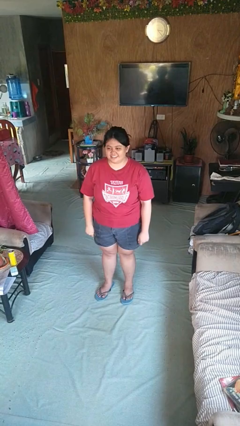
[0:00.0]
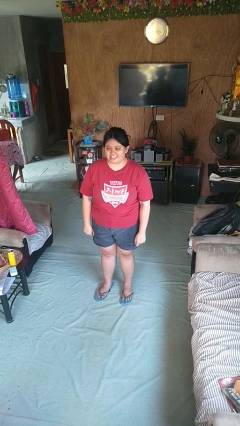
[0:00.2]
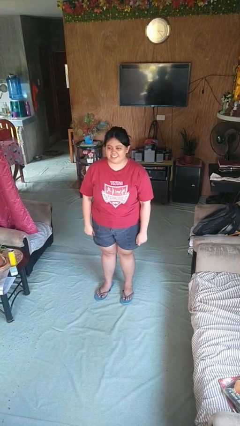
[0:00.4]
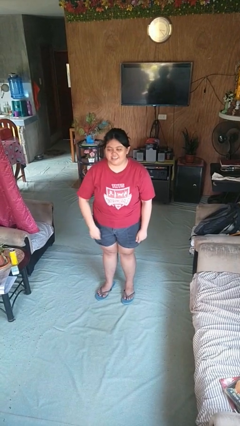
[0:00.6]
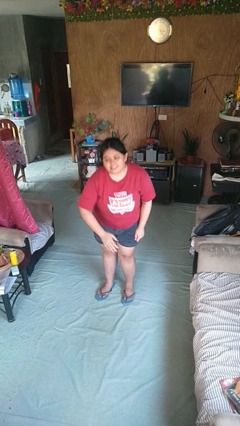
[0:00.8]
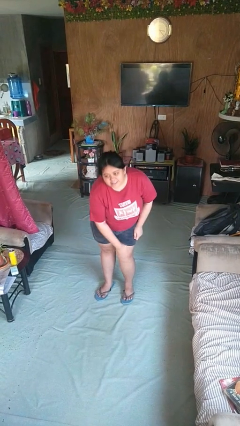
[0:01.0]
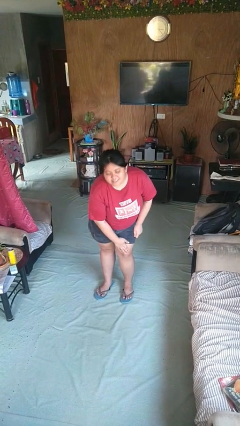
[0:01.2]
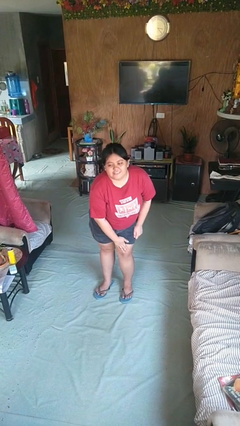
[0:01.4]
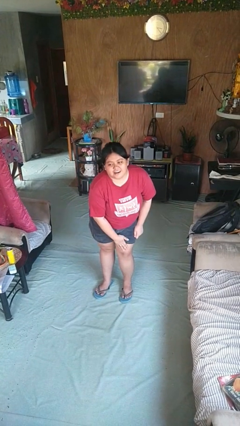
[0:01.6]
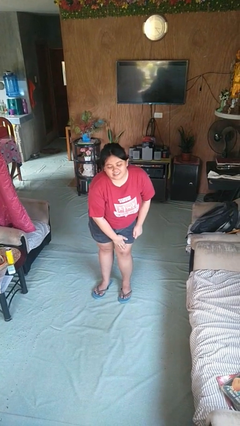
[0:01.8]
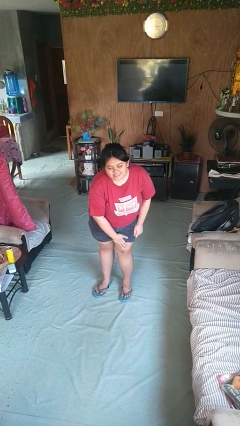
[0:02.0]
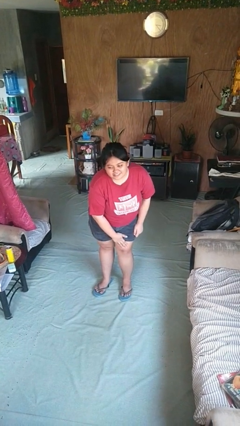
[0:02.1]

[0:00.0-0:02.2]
person swats bug

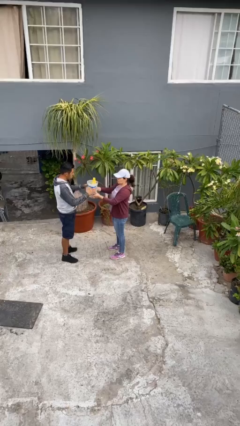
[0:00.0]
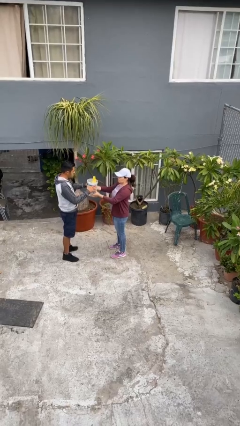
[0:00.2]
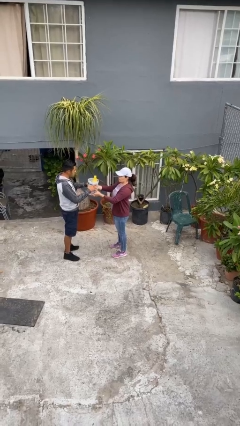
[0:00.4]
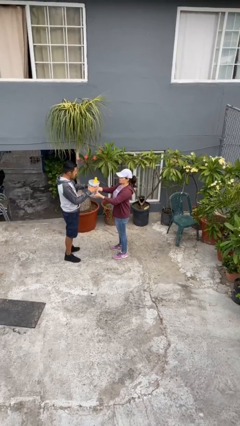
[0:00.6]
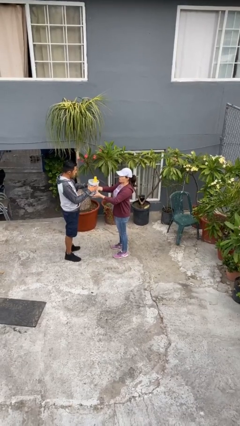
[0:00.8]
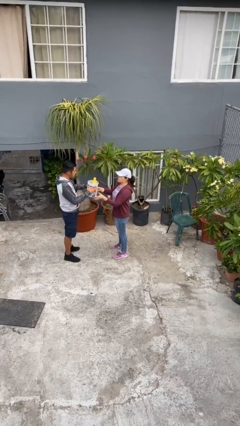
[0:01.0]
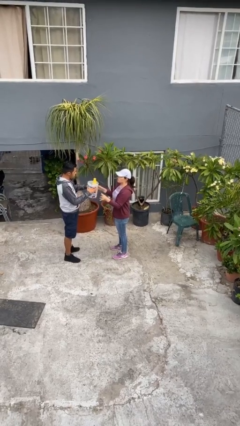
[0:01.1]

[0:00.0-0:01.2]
person transfers object to person

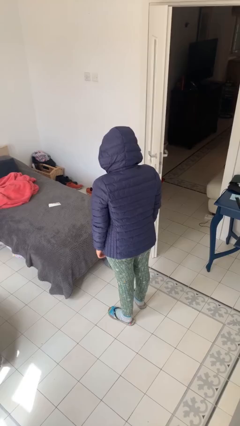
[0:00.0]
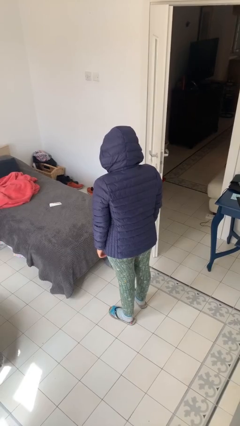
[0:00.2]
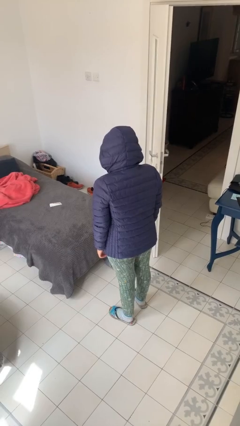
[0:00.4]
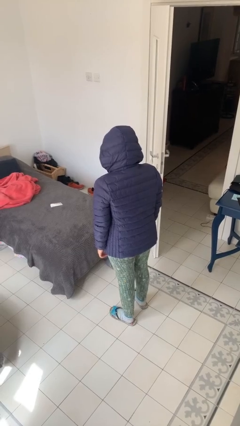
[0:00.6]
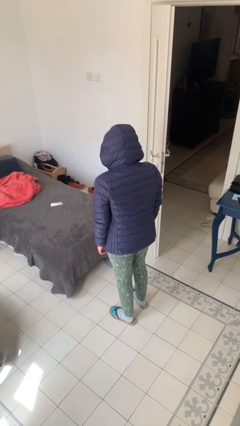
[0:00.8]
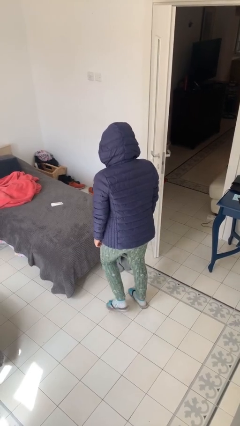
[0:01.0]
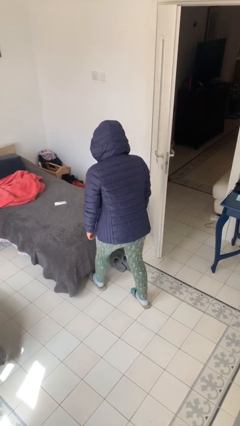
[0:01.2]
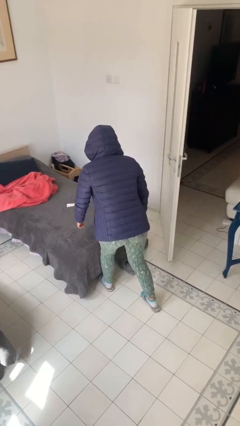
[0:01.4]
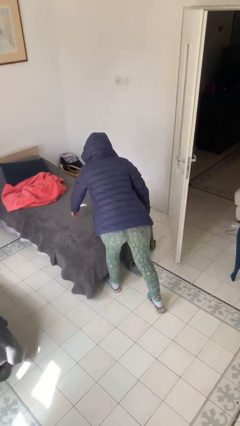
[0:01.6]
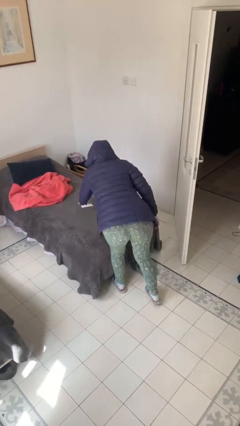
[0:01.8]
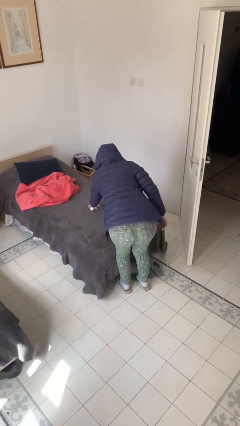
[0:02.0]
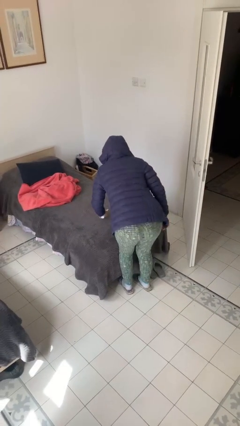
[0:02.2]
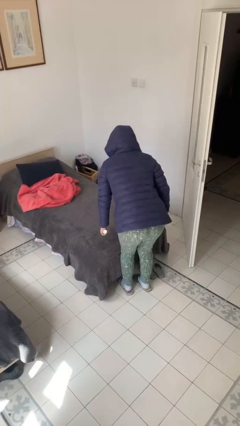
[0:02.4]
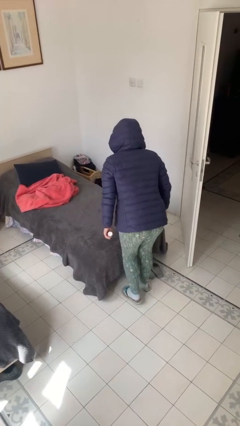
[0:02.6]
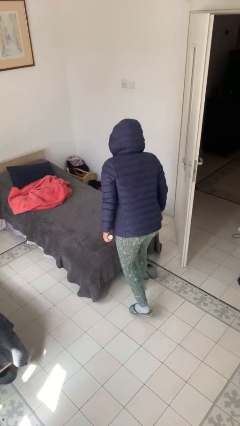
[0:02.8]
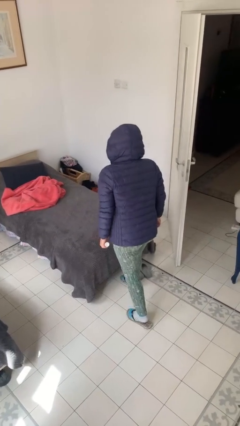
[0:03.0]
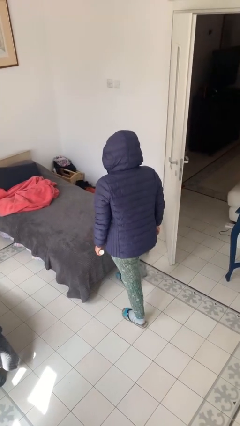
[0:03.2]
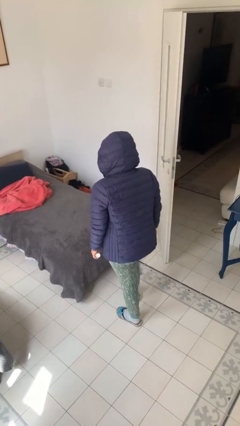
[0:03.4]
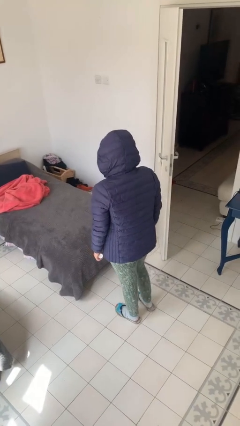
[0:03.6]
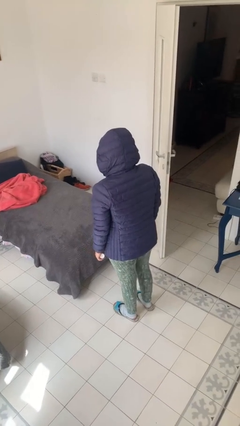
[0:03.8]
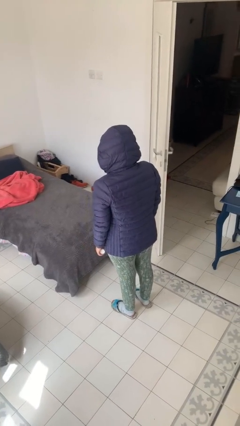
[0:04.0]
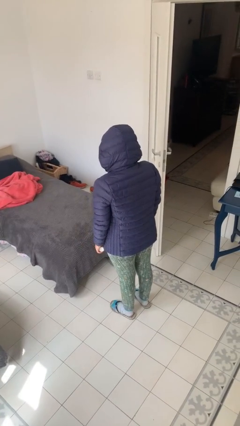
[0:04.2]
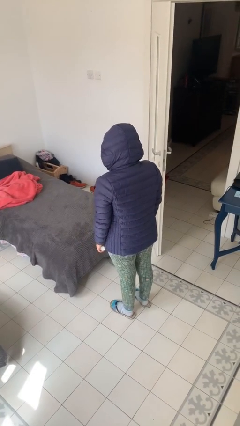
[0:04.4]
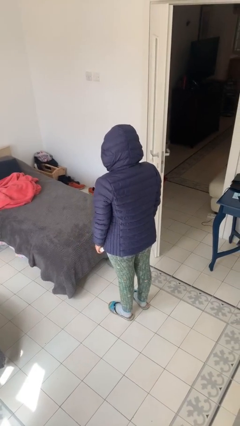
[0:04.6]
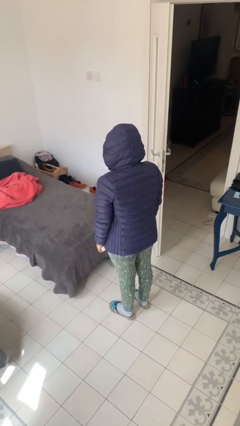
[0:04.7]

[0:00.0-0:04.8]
person picks up object from bed

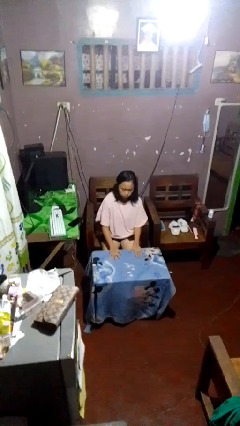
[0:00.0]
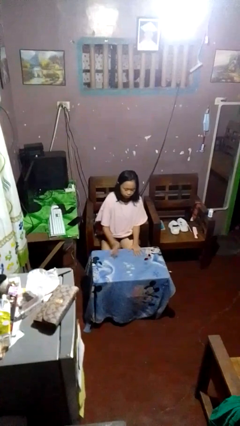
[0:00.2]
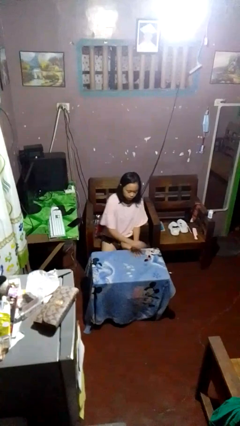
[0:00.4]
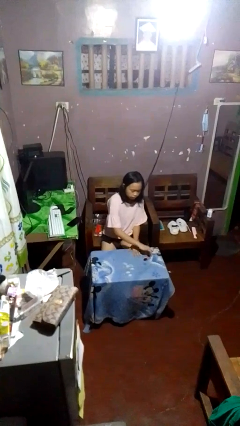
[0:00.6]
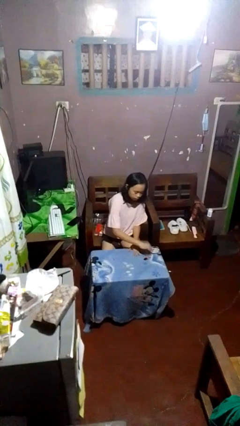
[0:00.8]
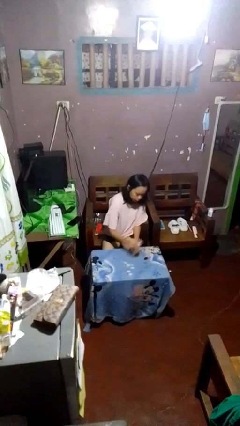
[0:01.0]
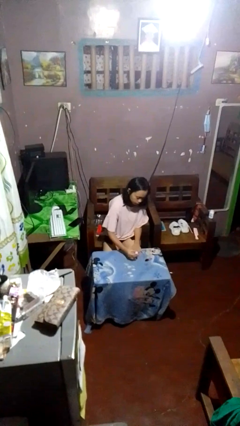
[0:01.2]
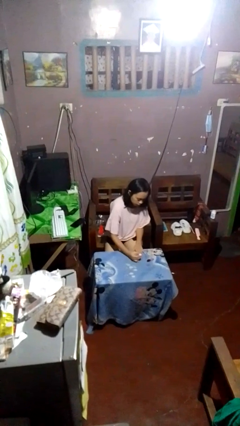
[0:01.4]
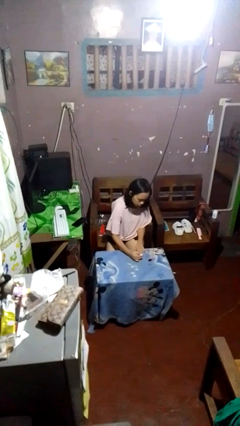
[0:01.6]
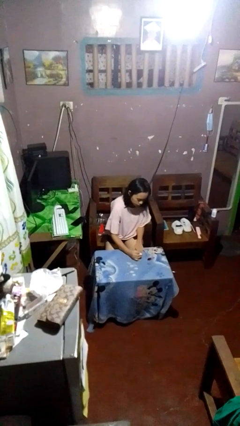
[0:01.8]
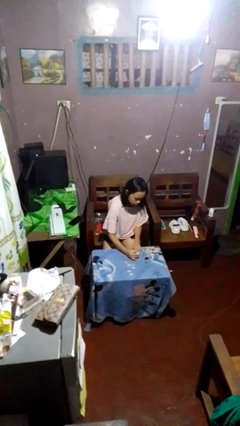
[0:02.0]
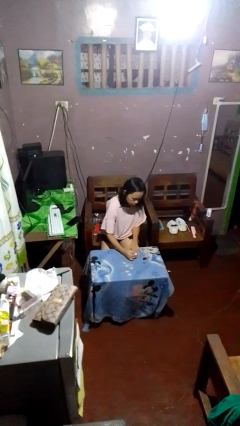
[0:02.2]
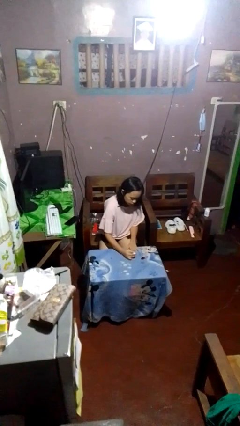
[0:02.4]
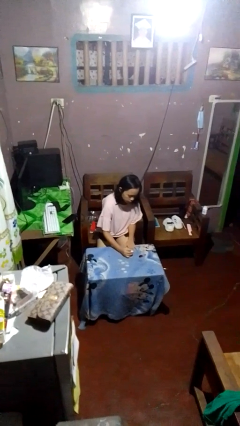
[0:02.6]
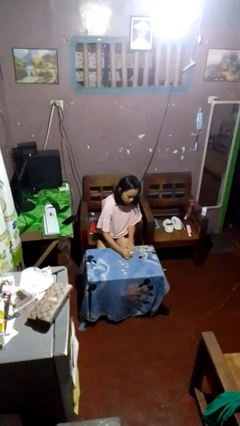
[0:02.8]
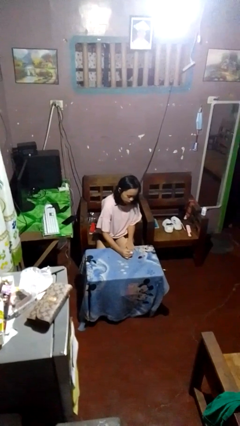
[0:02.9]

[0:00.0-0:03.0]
person paints fingernails

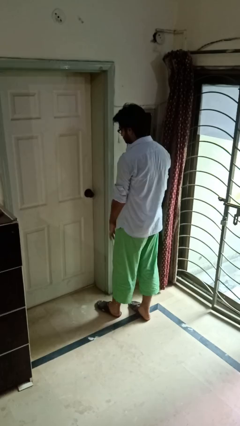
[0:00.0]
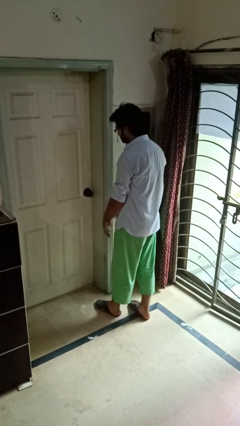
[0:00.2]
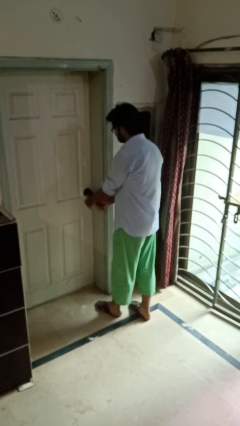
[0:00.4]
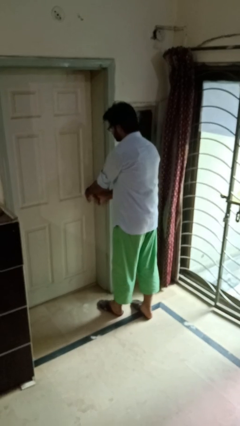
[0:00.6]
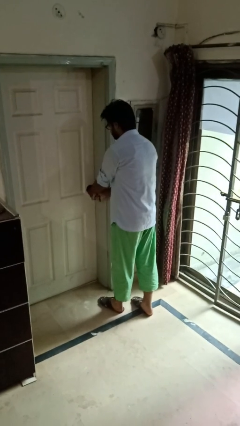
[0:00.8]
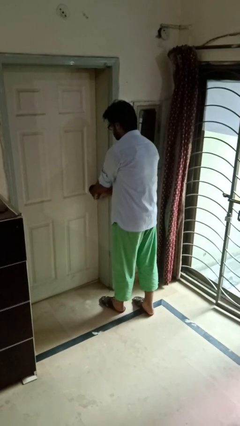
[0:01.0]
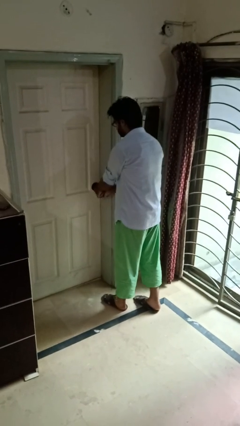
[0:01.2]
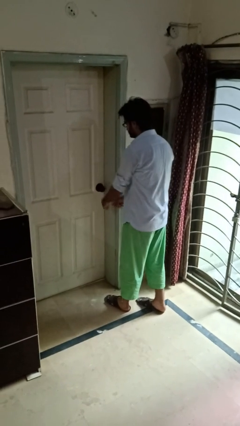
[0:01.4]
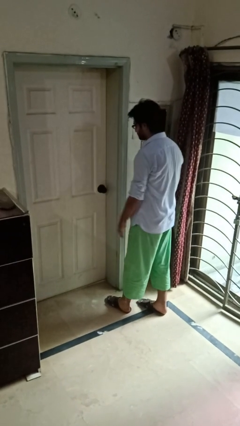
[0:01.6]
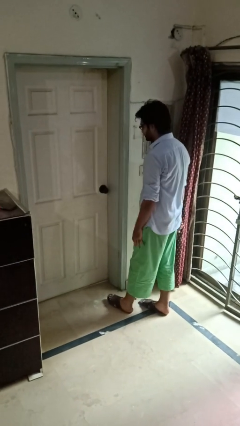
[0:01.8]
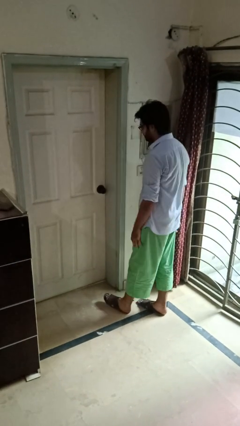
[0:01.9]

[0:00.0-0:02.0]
person locks door with keys

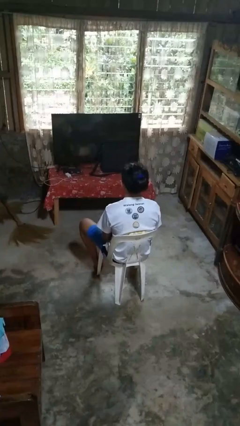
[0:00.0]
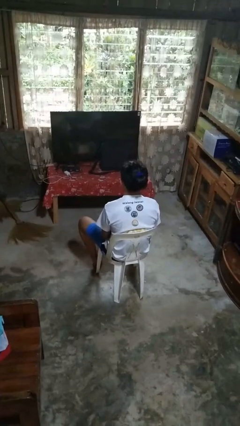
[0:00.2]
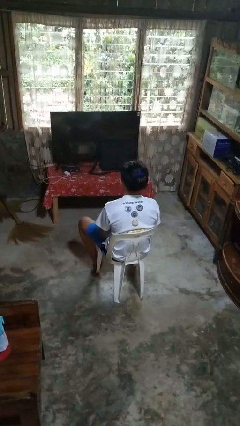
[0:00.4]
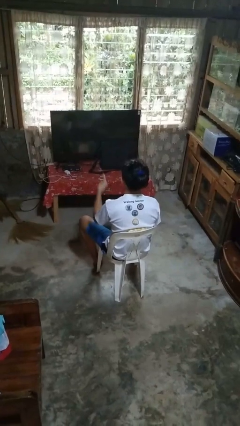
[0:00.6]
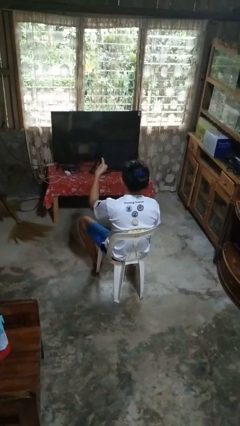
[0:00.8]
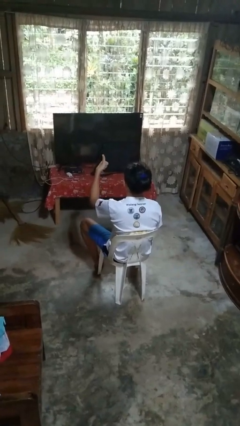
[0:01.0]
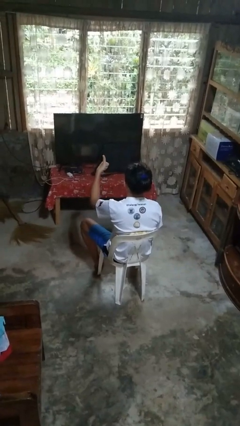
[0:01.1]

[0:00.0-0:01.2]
person gestures thumbs up

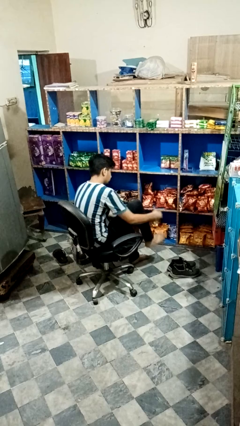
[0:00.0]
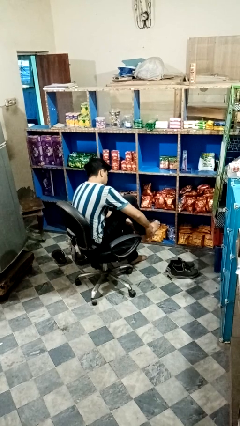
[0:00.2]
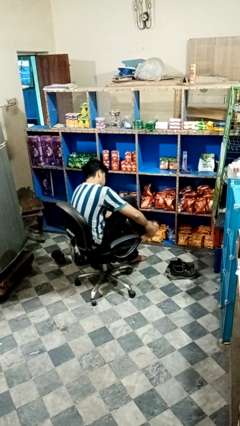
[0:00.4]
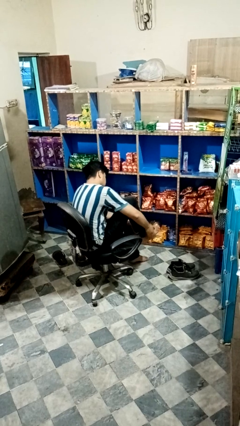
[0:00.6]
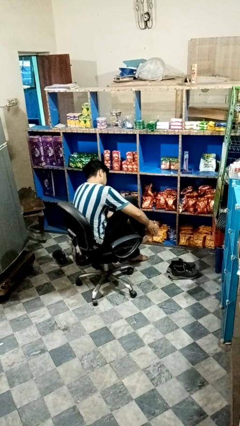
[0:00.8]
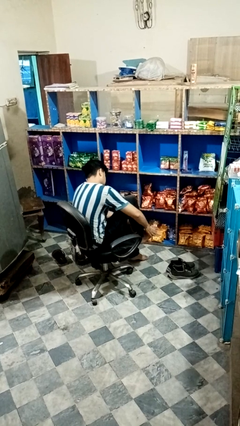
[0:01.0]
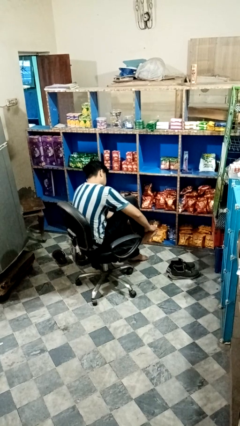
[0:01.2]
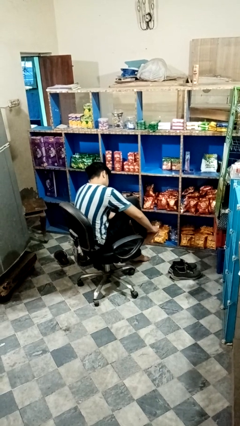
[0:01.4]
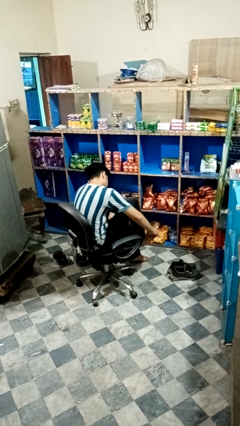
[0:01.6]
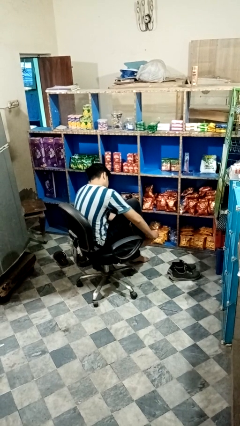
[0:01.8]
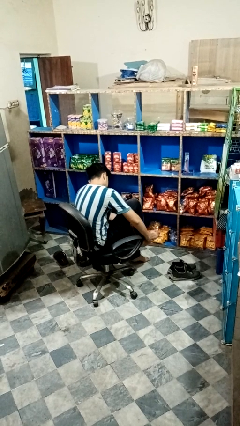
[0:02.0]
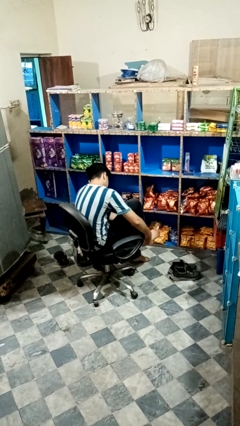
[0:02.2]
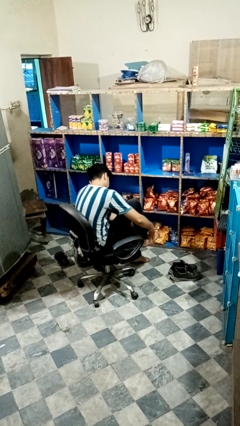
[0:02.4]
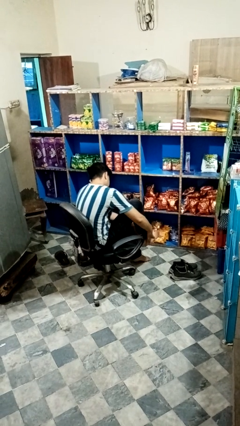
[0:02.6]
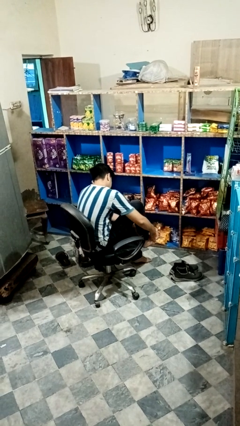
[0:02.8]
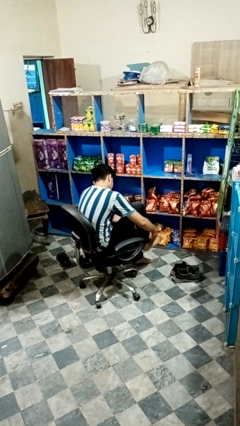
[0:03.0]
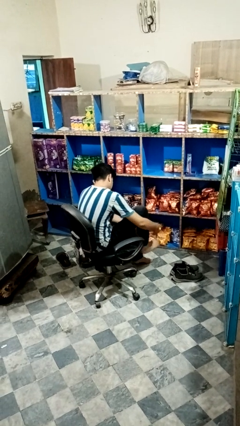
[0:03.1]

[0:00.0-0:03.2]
person rubs foot
